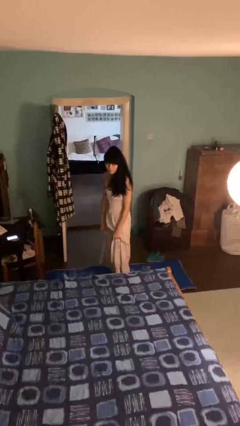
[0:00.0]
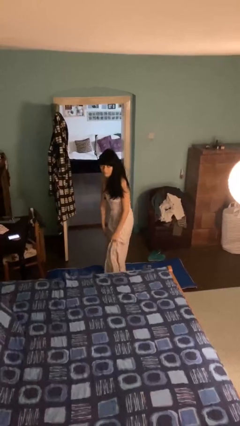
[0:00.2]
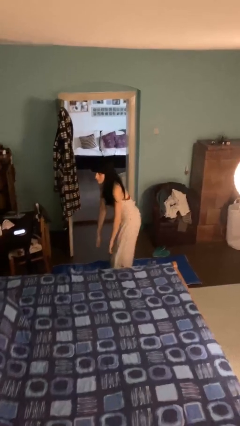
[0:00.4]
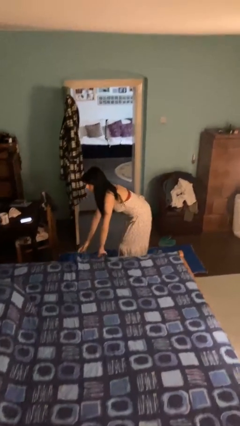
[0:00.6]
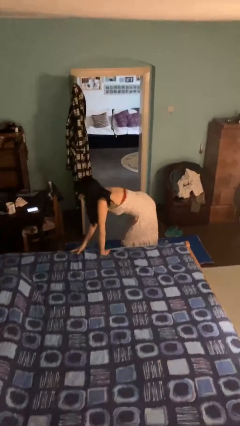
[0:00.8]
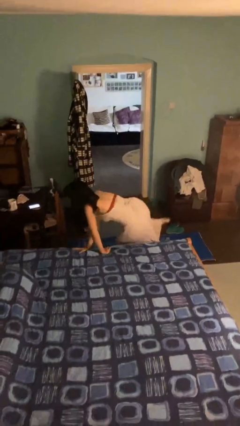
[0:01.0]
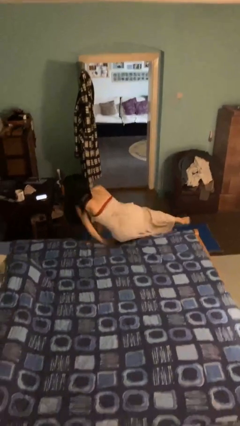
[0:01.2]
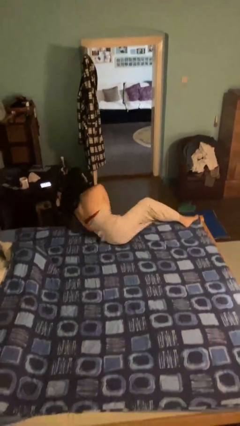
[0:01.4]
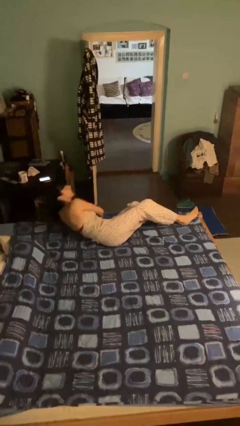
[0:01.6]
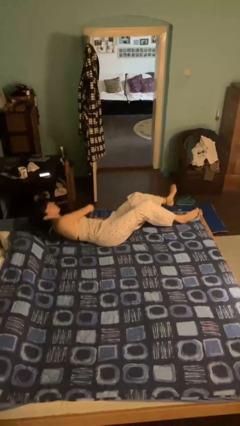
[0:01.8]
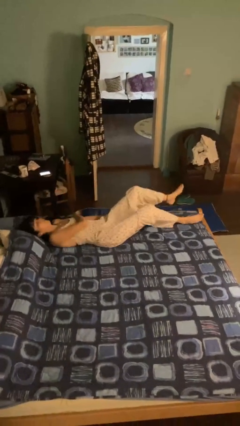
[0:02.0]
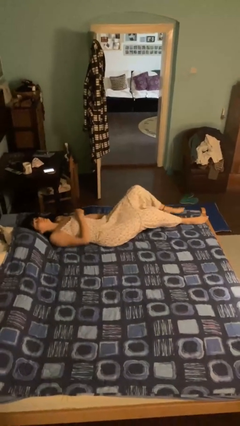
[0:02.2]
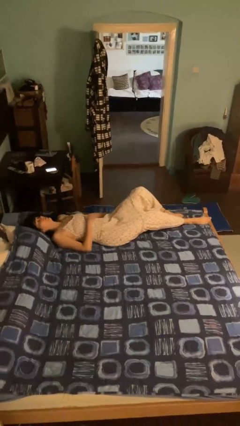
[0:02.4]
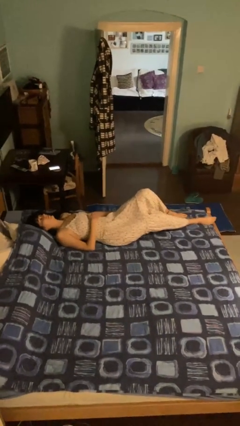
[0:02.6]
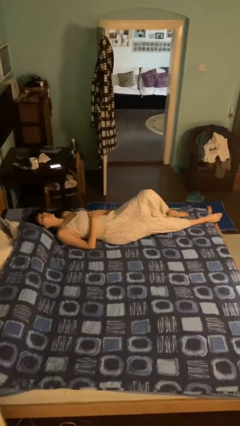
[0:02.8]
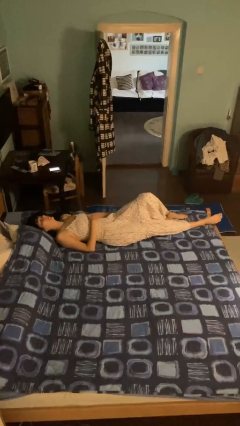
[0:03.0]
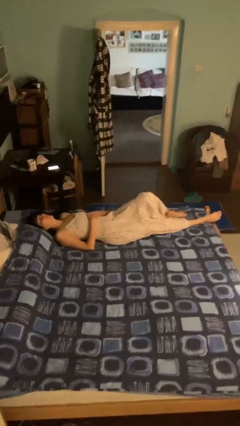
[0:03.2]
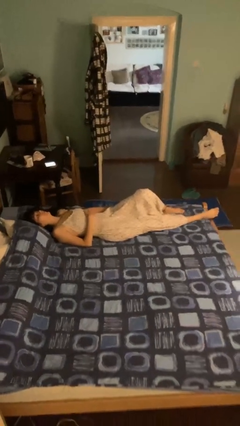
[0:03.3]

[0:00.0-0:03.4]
person lies down on bed
